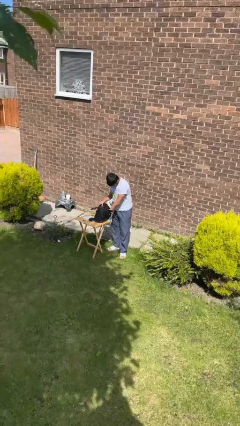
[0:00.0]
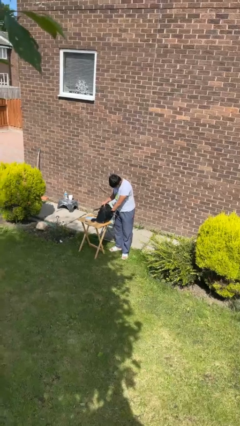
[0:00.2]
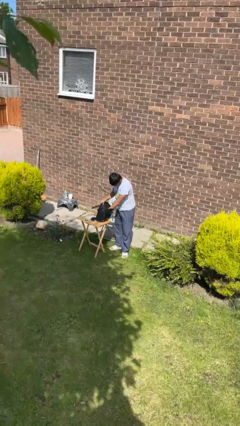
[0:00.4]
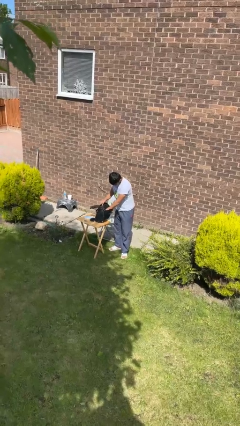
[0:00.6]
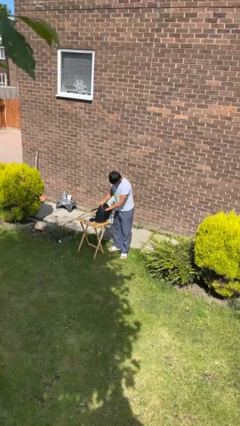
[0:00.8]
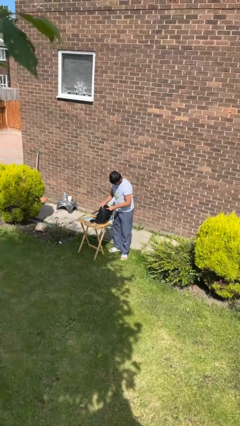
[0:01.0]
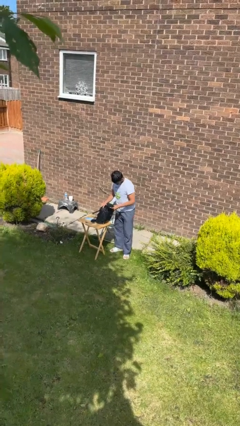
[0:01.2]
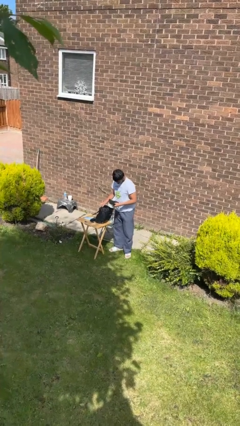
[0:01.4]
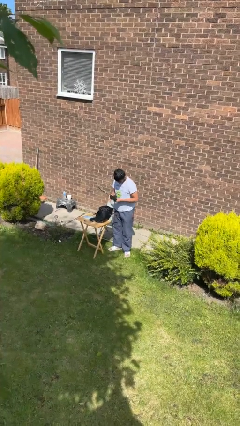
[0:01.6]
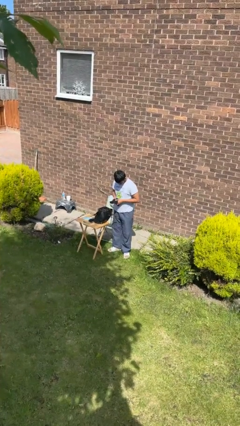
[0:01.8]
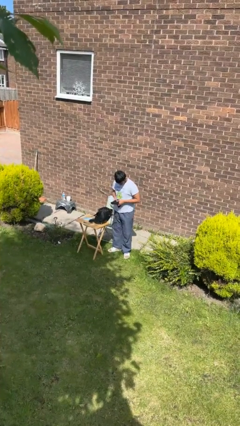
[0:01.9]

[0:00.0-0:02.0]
person takes object from backpack

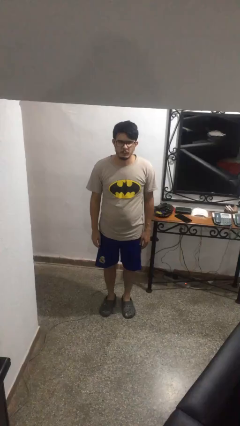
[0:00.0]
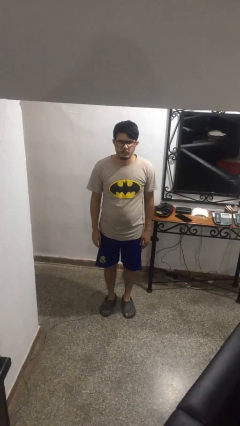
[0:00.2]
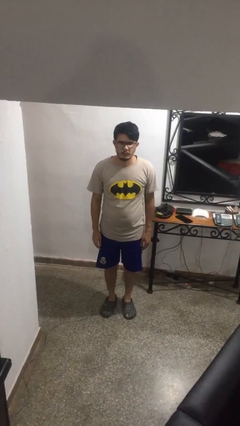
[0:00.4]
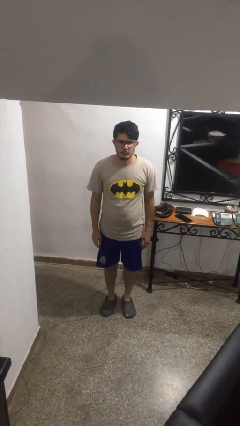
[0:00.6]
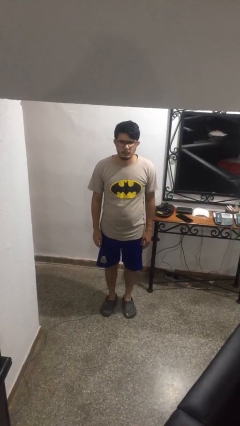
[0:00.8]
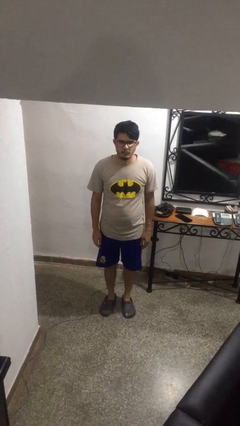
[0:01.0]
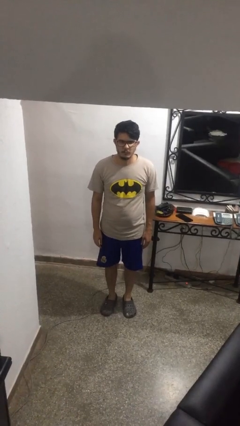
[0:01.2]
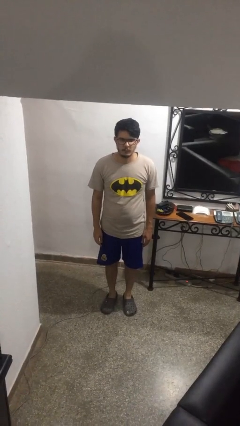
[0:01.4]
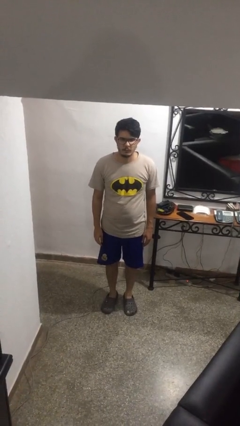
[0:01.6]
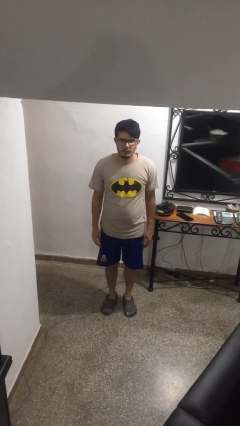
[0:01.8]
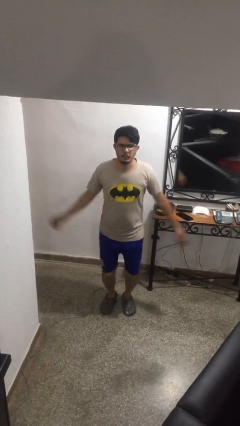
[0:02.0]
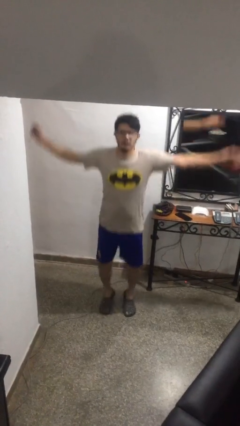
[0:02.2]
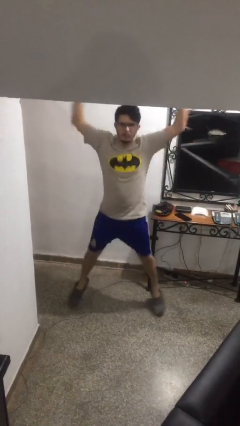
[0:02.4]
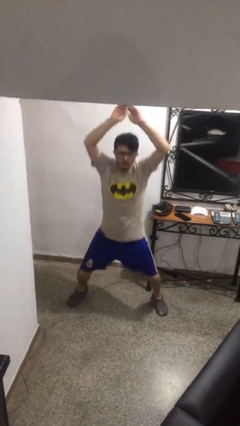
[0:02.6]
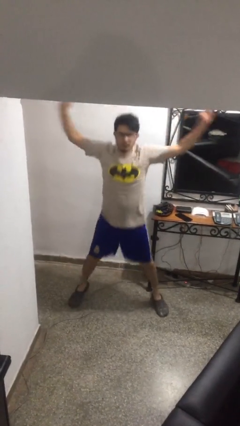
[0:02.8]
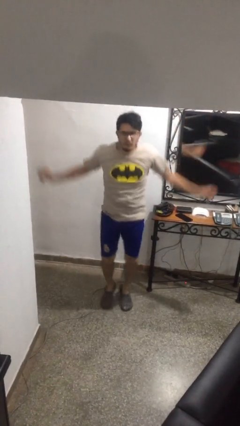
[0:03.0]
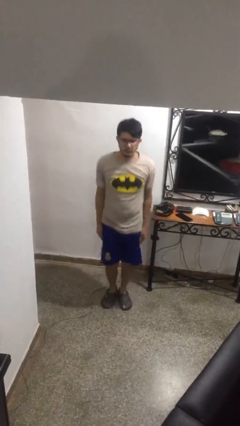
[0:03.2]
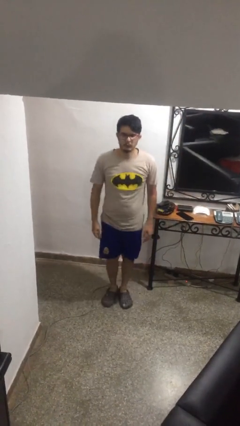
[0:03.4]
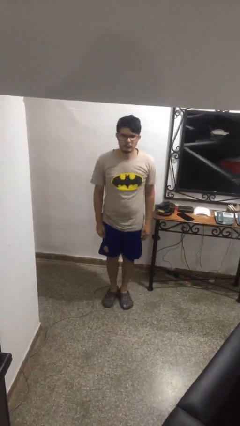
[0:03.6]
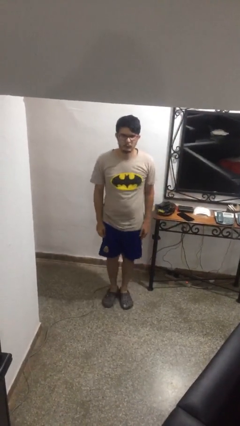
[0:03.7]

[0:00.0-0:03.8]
person exercises with jumping jacks

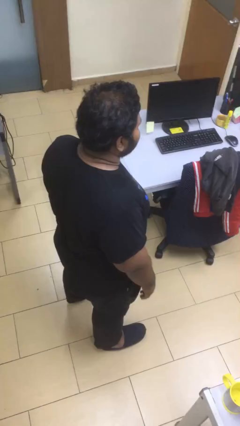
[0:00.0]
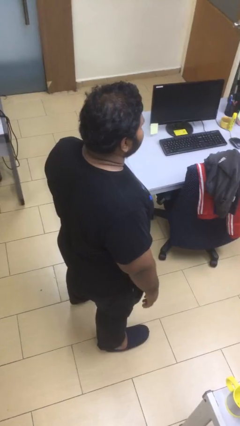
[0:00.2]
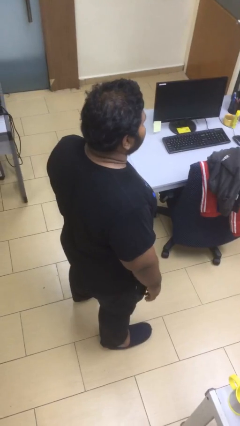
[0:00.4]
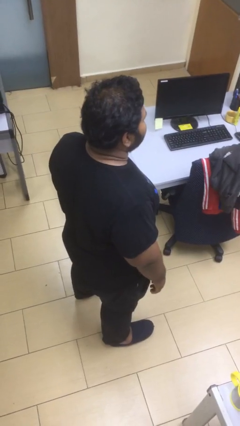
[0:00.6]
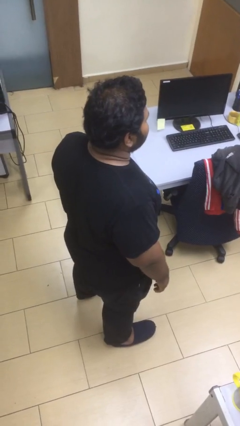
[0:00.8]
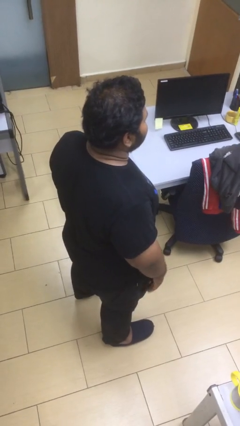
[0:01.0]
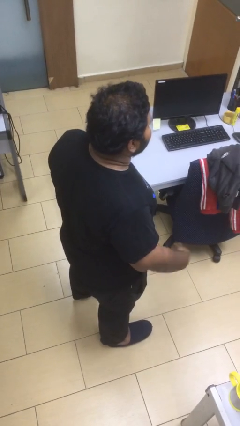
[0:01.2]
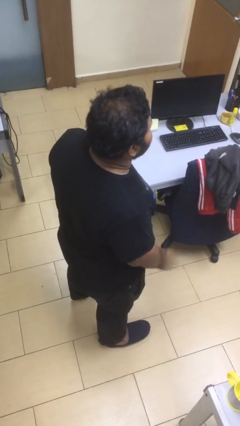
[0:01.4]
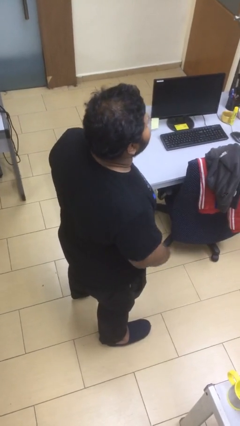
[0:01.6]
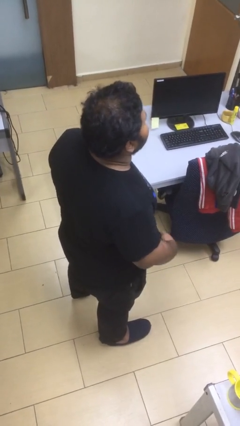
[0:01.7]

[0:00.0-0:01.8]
person slaps hands on thighs

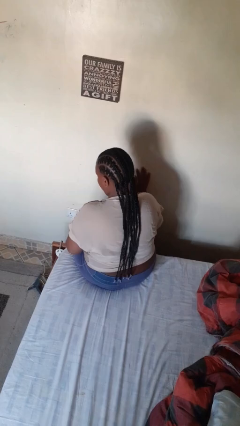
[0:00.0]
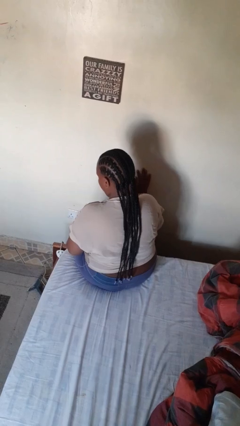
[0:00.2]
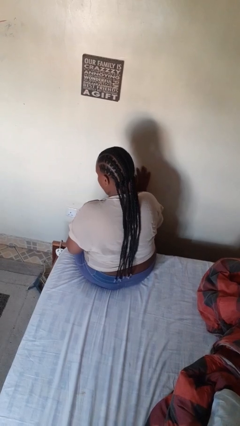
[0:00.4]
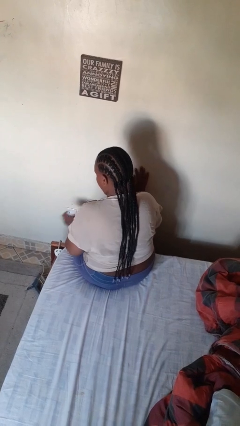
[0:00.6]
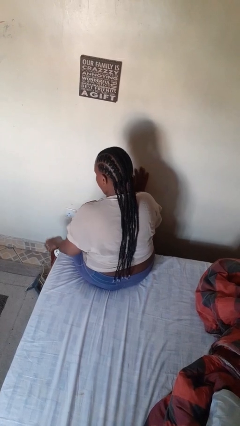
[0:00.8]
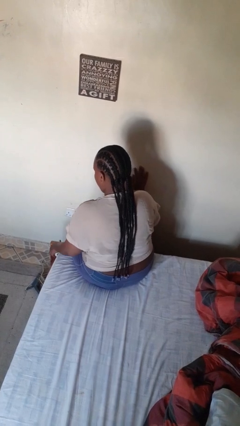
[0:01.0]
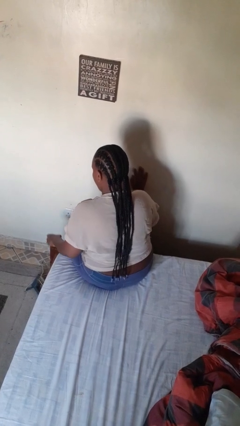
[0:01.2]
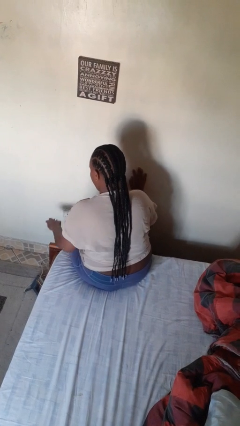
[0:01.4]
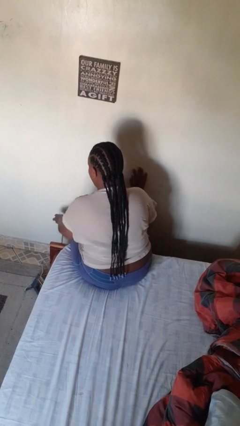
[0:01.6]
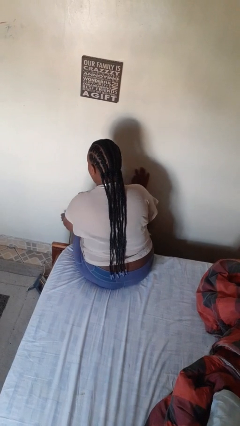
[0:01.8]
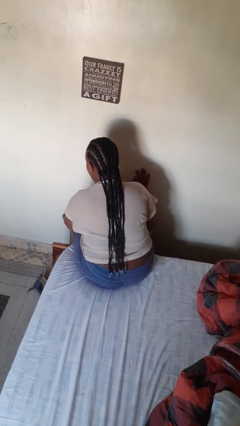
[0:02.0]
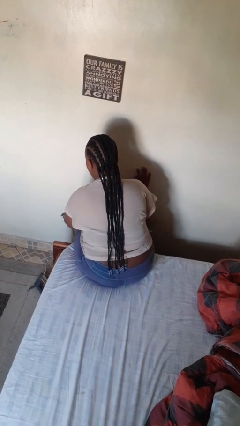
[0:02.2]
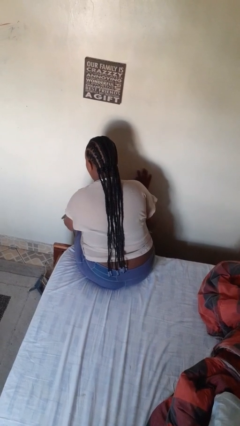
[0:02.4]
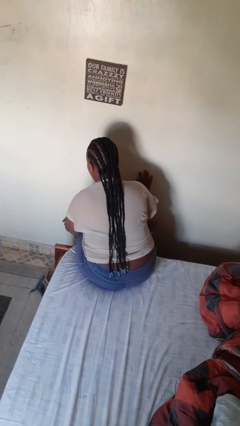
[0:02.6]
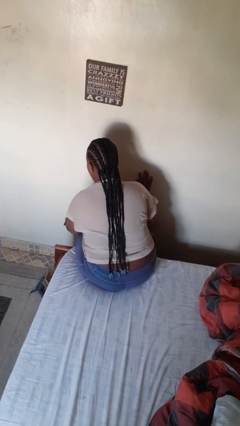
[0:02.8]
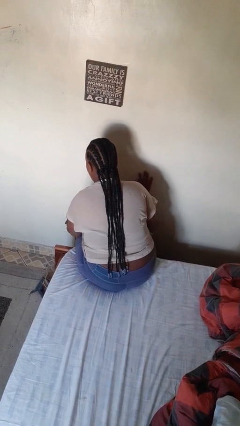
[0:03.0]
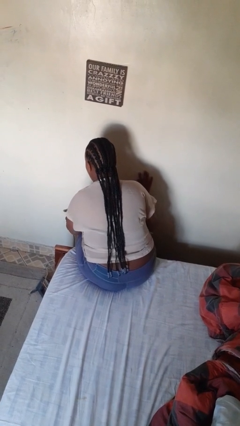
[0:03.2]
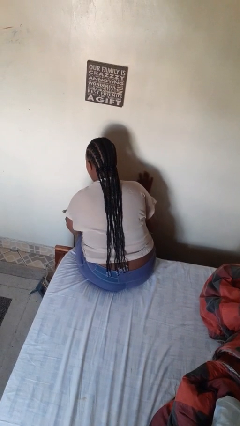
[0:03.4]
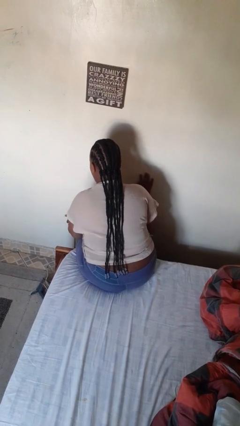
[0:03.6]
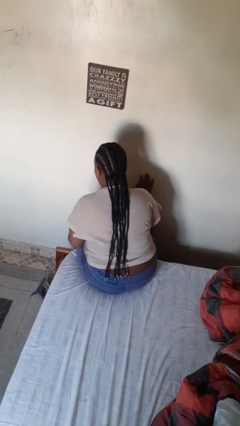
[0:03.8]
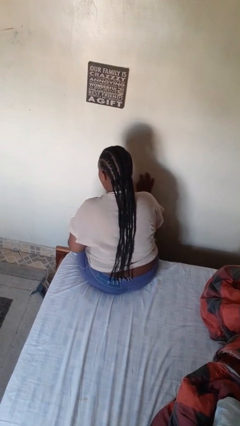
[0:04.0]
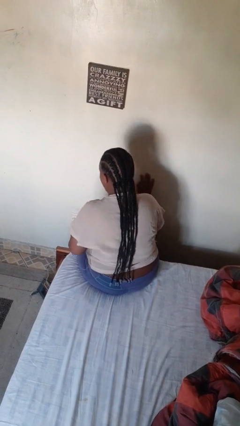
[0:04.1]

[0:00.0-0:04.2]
person plugs into electrical socket

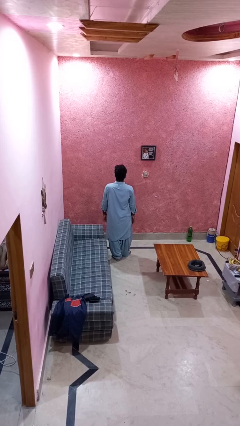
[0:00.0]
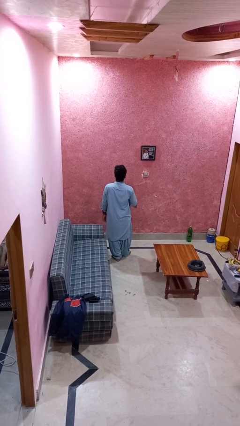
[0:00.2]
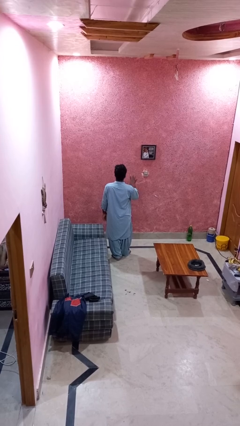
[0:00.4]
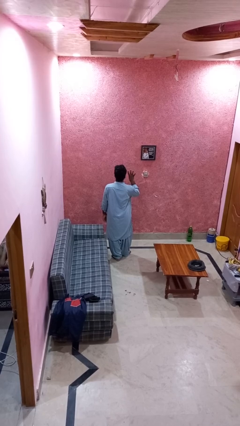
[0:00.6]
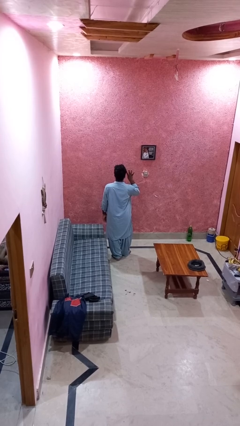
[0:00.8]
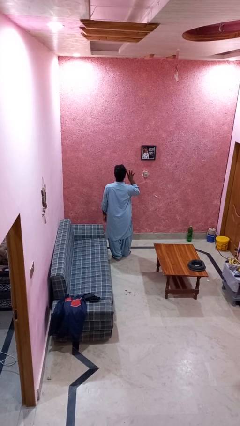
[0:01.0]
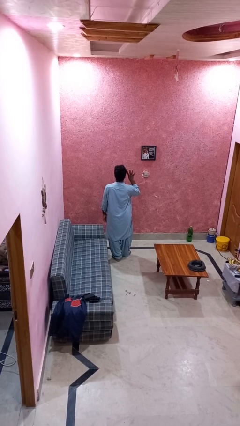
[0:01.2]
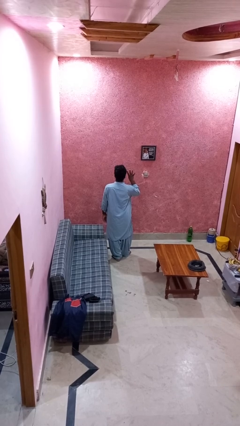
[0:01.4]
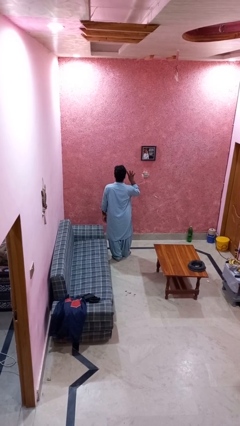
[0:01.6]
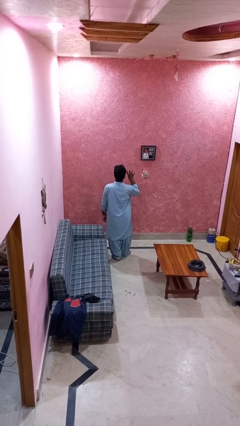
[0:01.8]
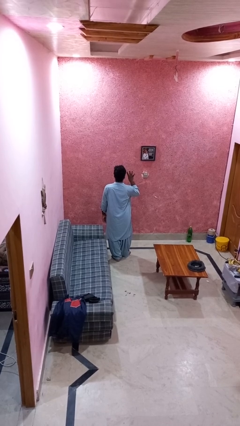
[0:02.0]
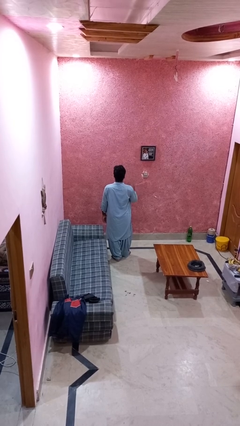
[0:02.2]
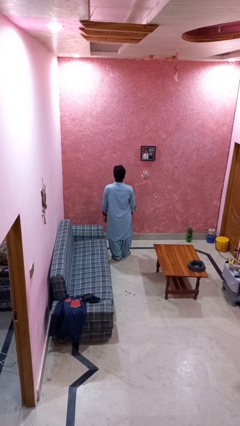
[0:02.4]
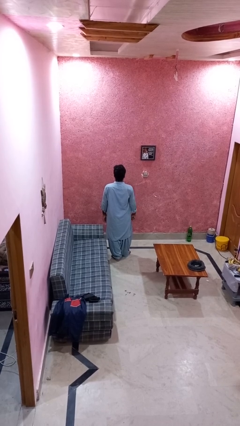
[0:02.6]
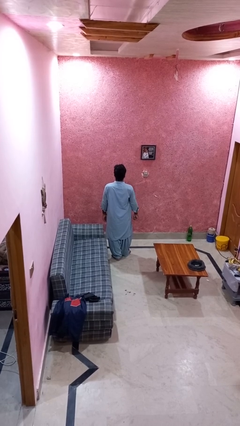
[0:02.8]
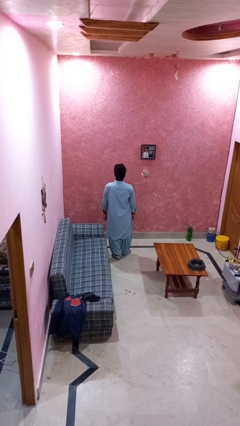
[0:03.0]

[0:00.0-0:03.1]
person gestures number four

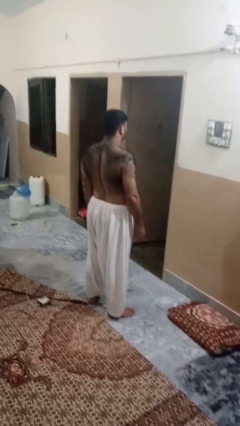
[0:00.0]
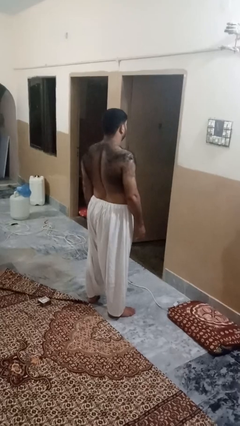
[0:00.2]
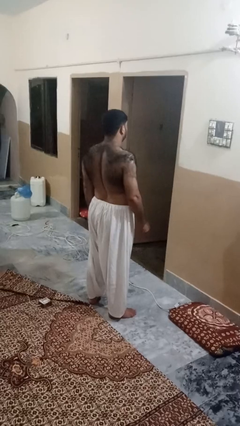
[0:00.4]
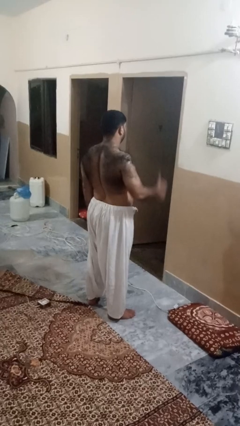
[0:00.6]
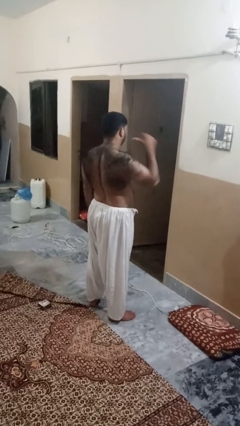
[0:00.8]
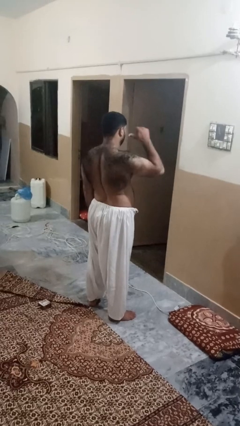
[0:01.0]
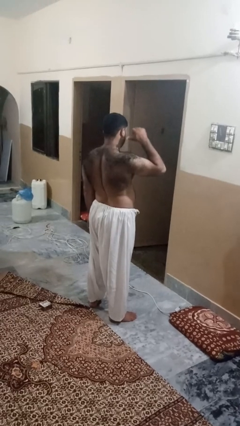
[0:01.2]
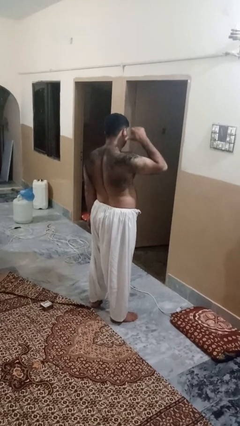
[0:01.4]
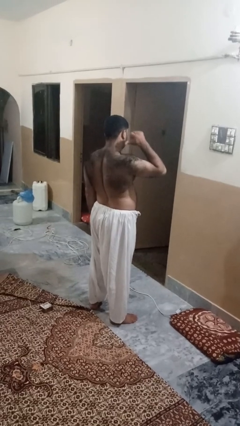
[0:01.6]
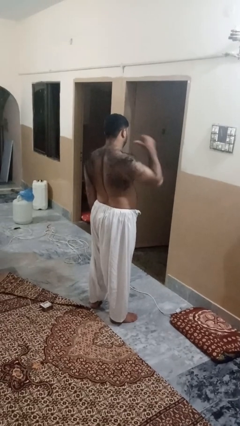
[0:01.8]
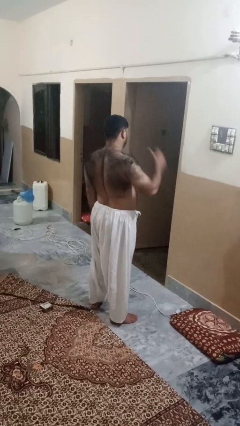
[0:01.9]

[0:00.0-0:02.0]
person gestures behind me

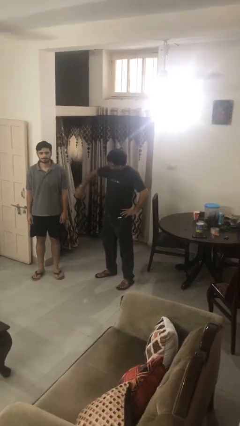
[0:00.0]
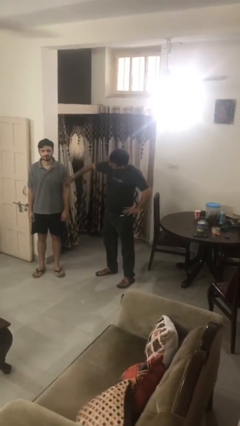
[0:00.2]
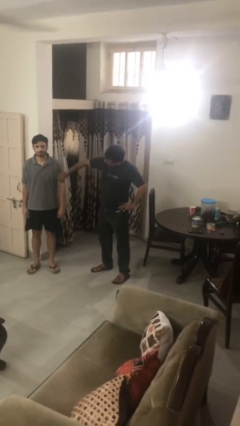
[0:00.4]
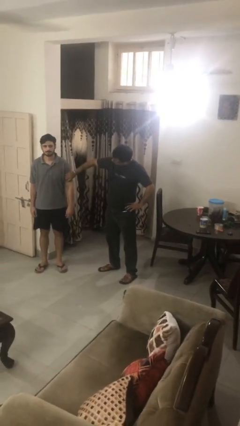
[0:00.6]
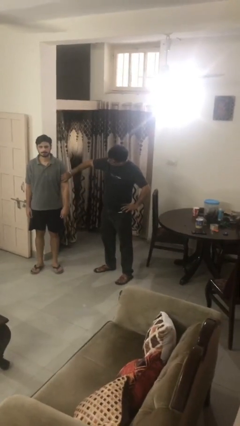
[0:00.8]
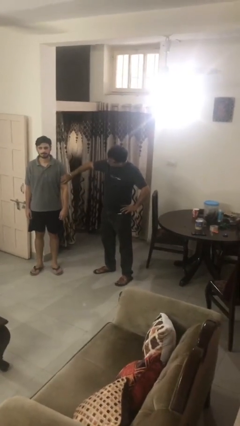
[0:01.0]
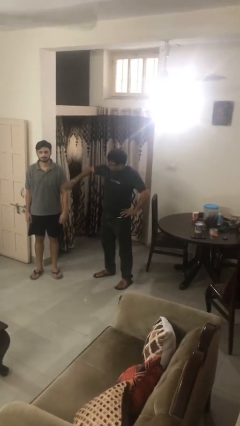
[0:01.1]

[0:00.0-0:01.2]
person grabs person by bicep
